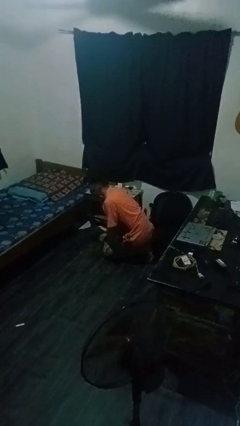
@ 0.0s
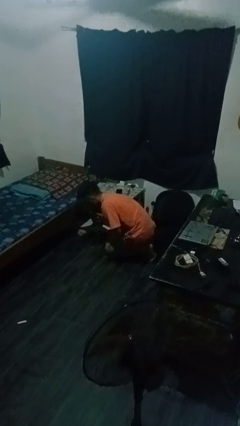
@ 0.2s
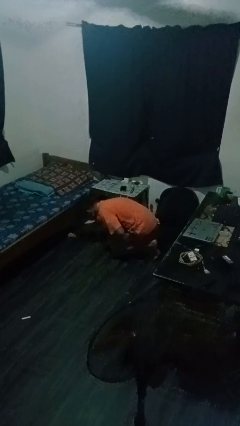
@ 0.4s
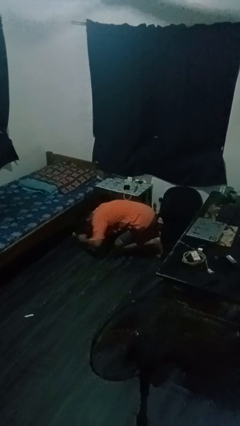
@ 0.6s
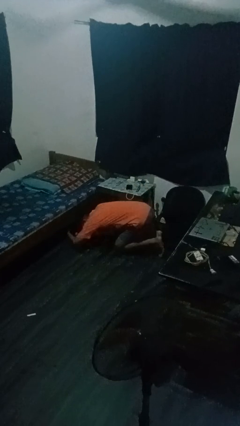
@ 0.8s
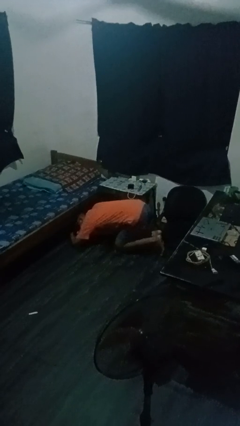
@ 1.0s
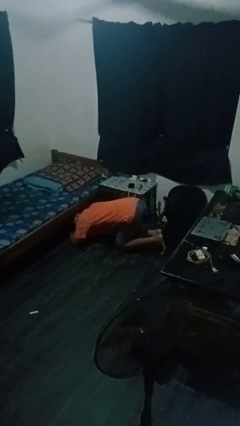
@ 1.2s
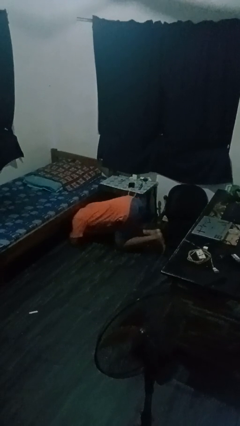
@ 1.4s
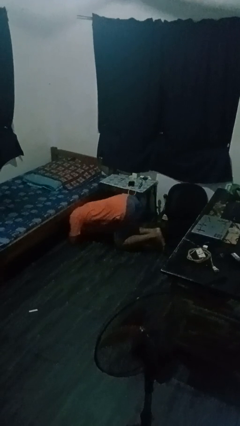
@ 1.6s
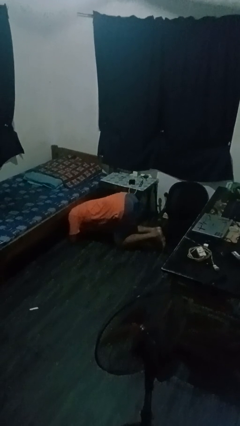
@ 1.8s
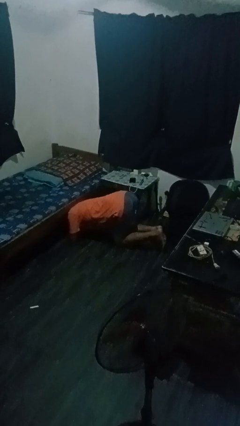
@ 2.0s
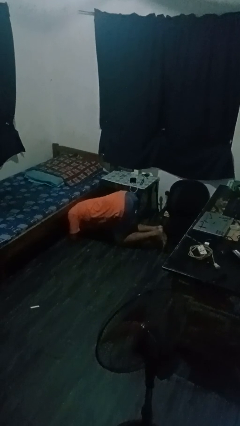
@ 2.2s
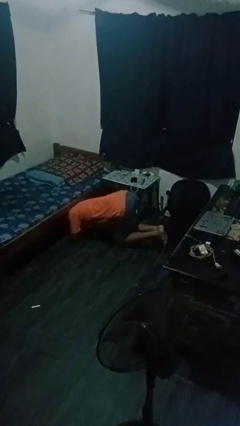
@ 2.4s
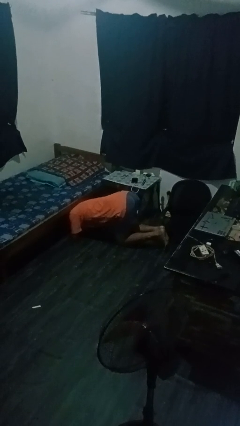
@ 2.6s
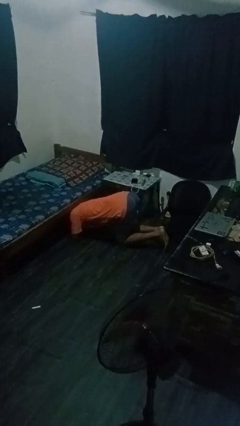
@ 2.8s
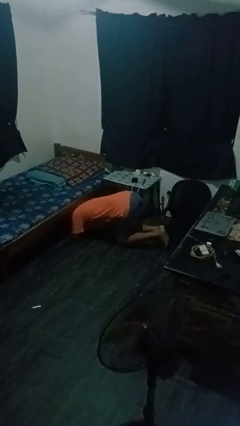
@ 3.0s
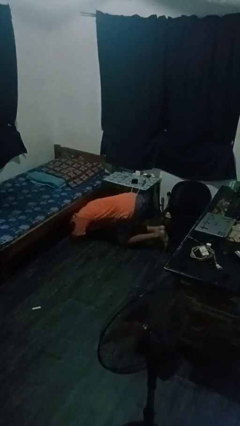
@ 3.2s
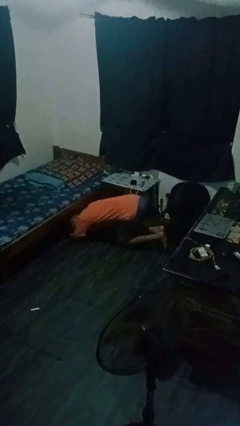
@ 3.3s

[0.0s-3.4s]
person searches under bed

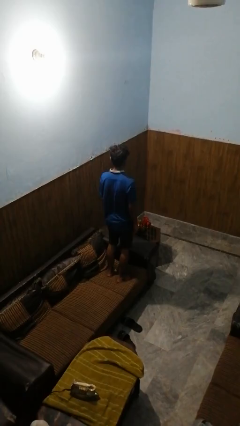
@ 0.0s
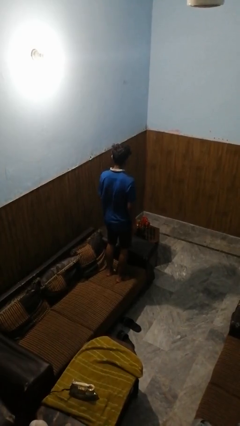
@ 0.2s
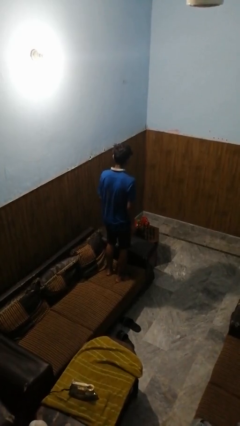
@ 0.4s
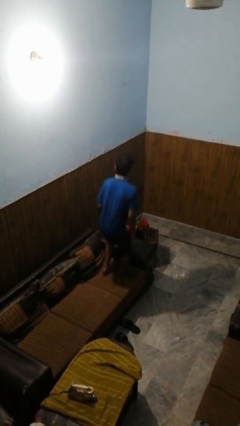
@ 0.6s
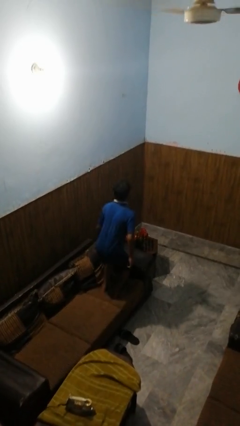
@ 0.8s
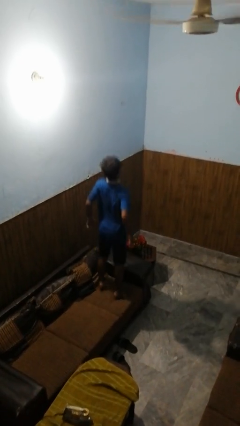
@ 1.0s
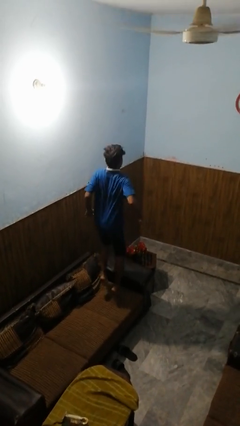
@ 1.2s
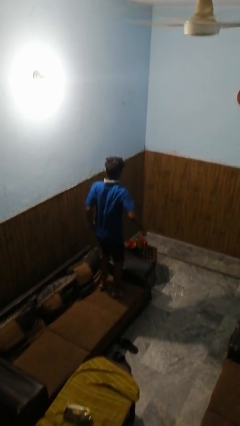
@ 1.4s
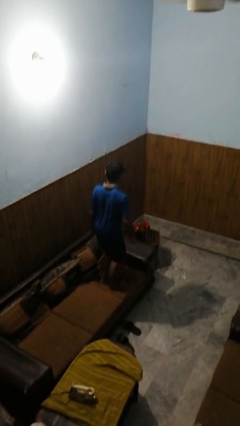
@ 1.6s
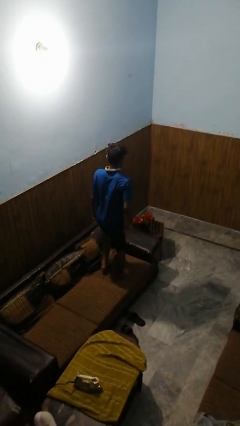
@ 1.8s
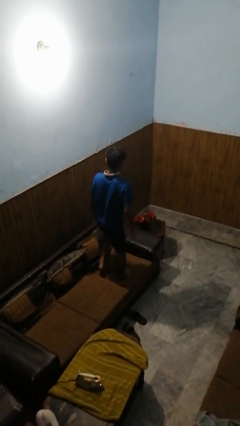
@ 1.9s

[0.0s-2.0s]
person jumps on couch

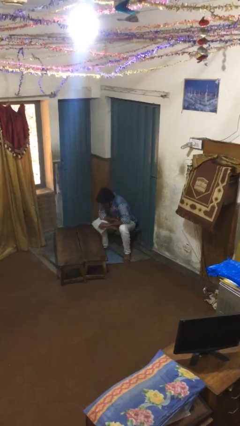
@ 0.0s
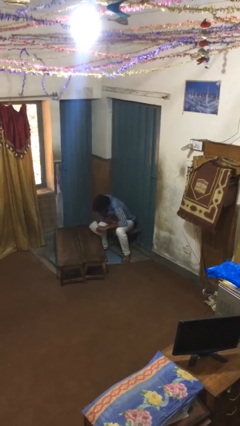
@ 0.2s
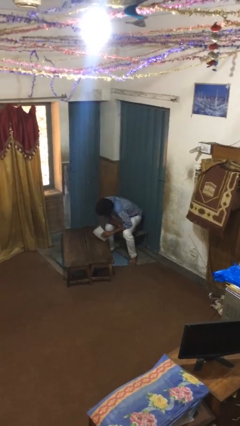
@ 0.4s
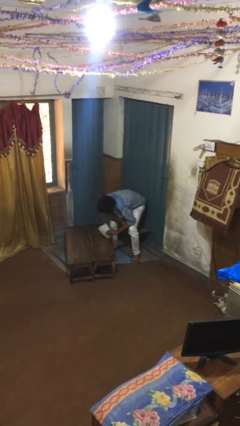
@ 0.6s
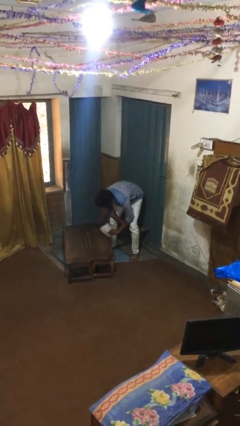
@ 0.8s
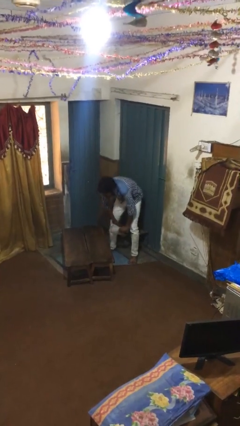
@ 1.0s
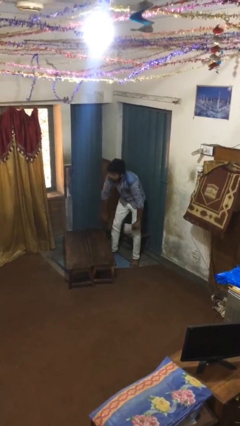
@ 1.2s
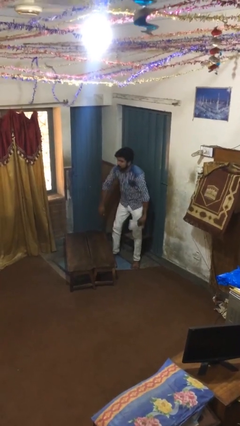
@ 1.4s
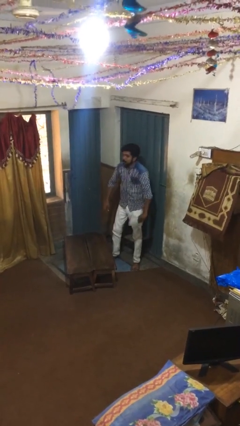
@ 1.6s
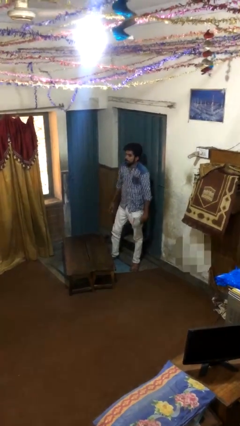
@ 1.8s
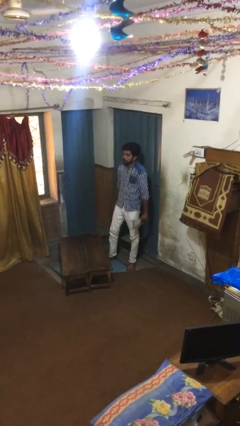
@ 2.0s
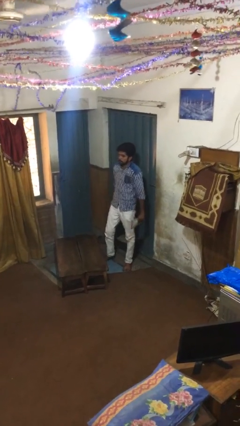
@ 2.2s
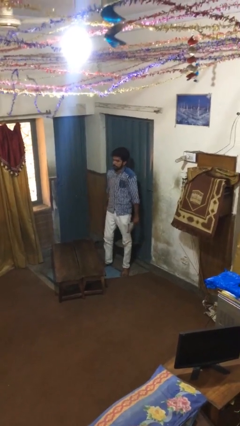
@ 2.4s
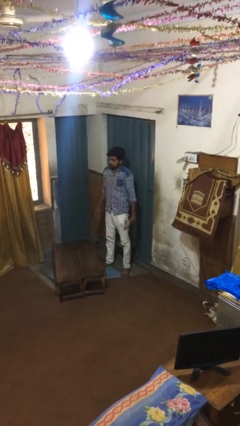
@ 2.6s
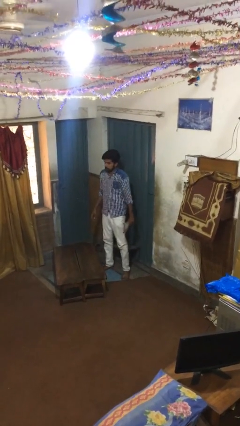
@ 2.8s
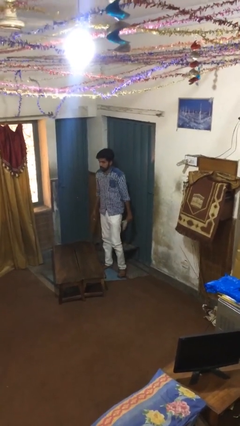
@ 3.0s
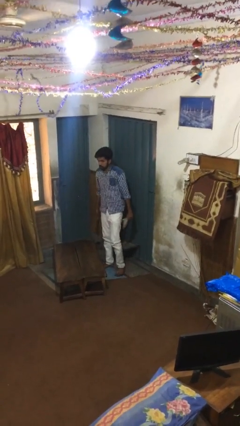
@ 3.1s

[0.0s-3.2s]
person stands up

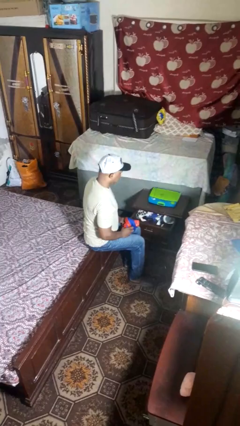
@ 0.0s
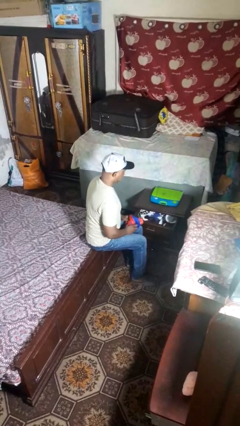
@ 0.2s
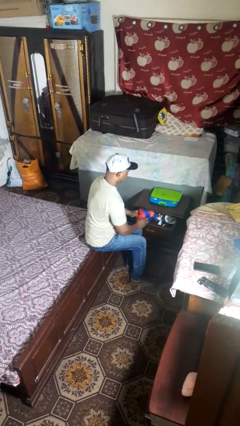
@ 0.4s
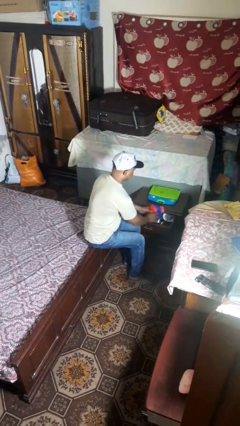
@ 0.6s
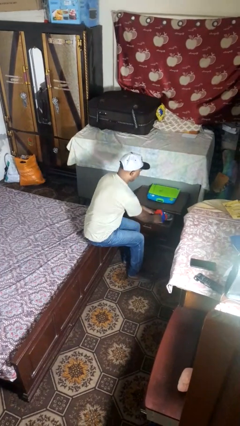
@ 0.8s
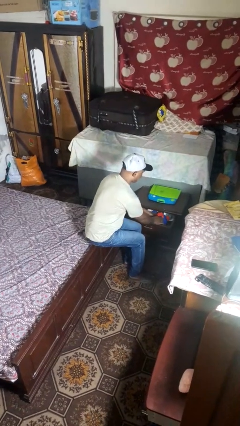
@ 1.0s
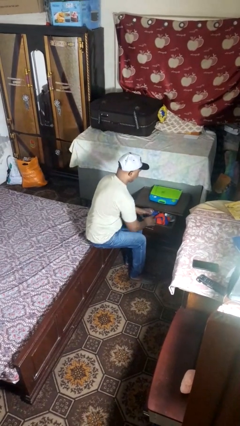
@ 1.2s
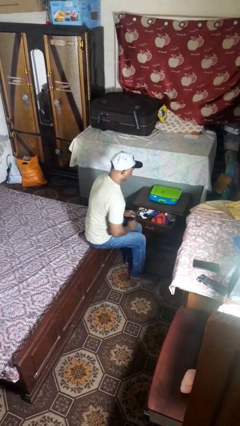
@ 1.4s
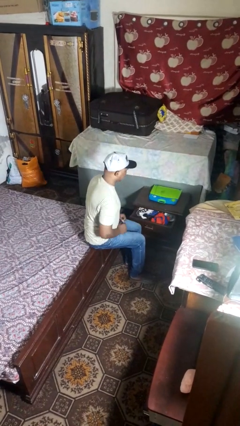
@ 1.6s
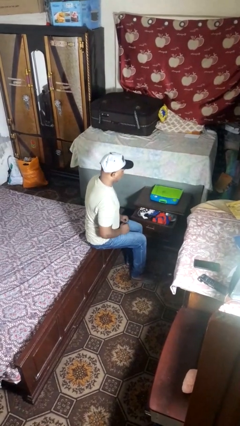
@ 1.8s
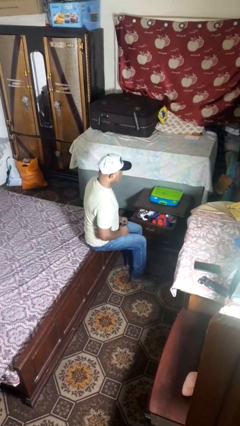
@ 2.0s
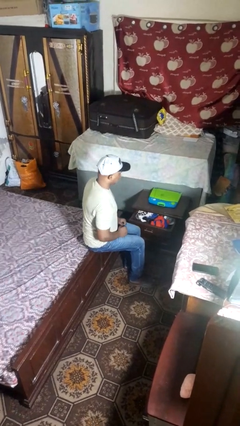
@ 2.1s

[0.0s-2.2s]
person puts clothes into dresser

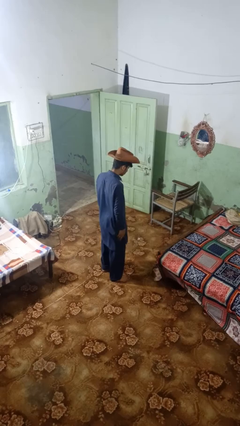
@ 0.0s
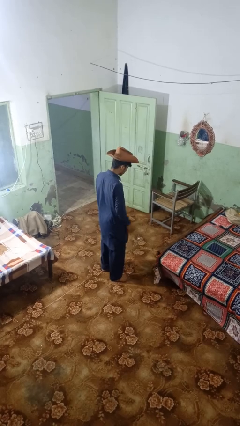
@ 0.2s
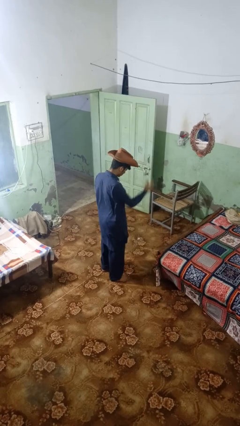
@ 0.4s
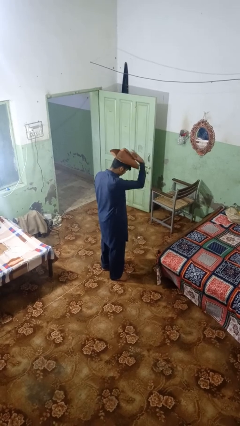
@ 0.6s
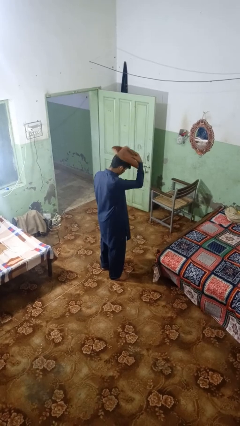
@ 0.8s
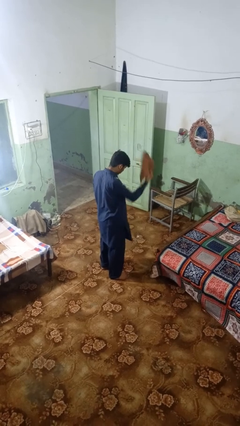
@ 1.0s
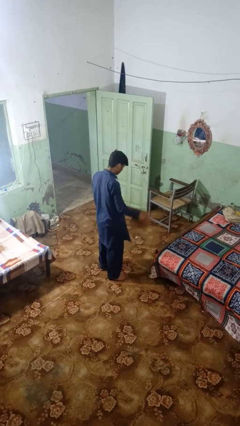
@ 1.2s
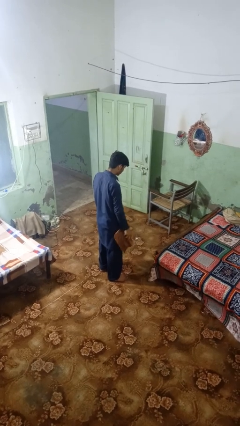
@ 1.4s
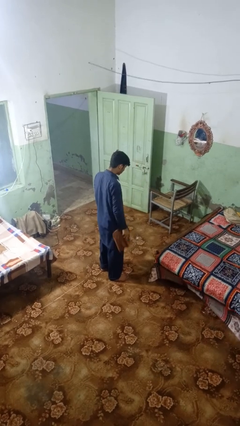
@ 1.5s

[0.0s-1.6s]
person takes off hat

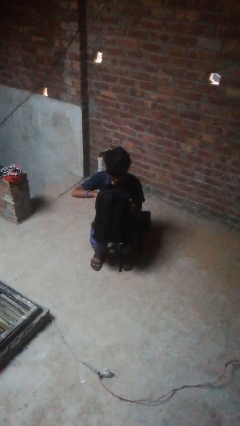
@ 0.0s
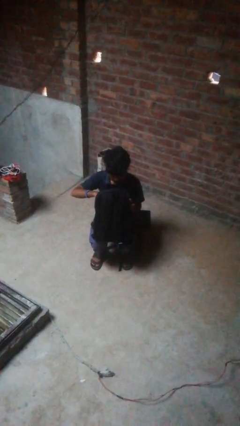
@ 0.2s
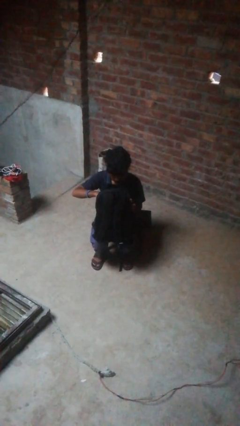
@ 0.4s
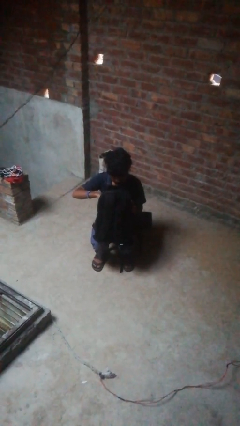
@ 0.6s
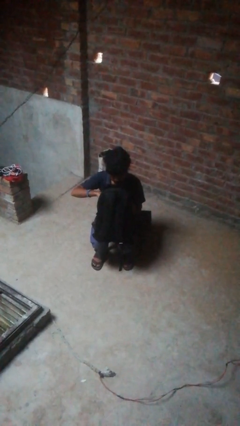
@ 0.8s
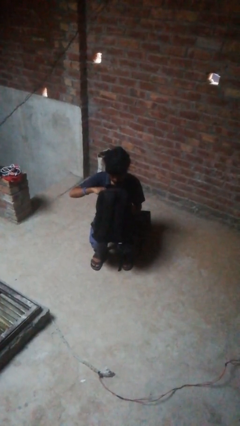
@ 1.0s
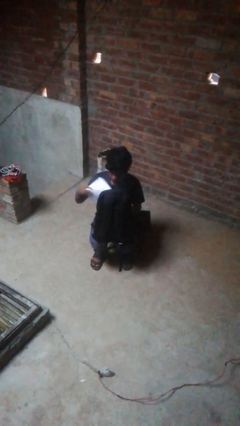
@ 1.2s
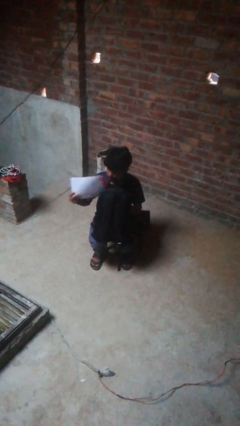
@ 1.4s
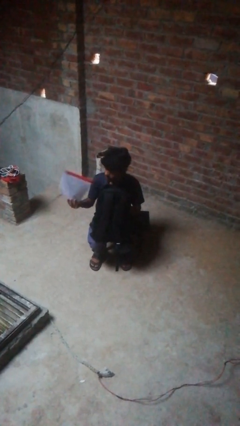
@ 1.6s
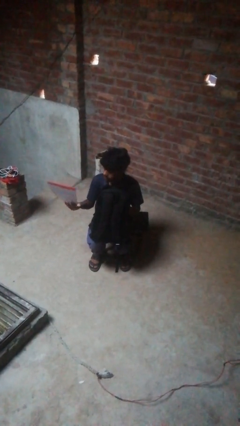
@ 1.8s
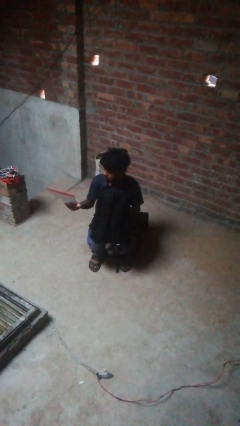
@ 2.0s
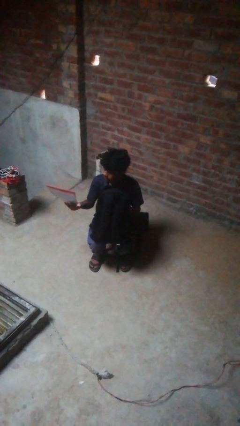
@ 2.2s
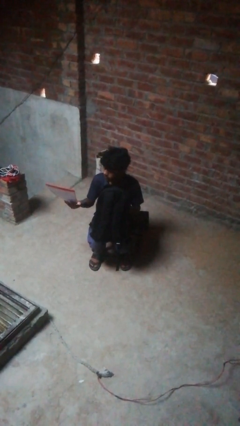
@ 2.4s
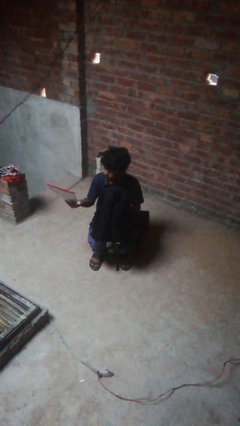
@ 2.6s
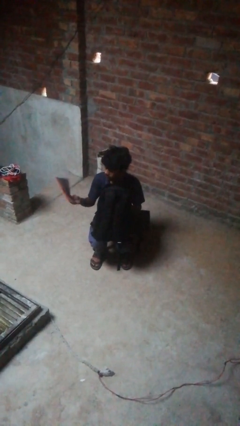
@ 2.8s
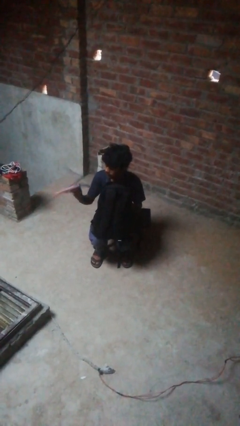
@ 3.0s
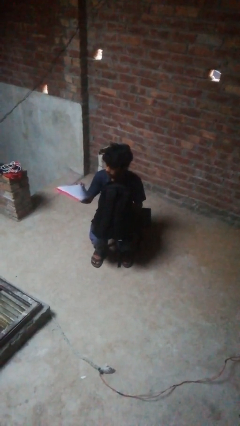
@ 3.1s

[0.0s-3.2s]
person takes object from backpack

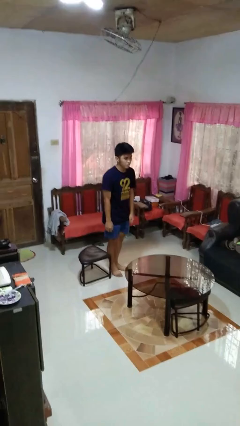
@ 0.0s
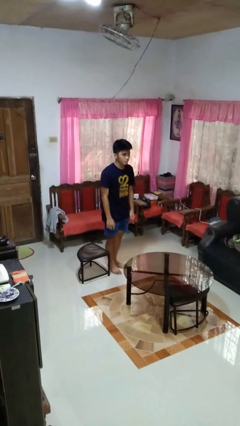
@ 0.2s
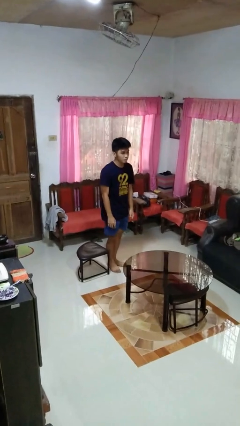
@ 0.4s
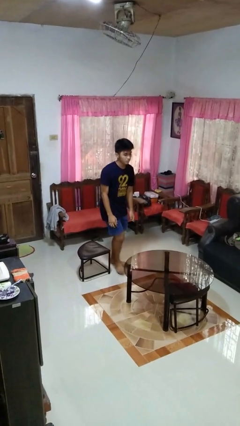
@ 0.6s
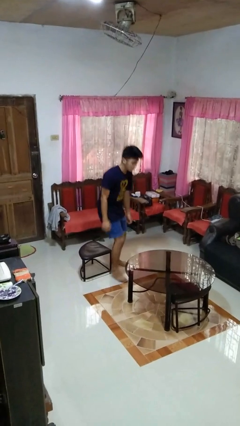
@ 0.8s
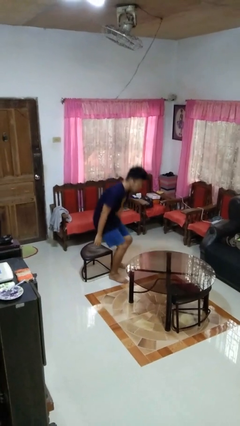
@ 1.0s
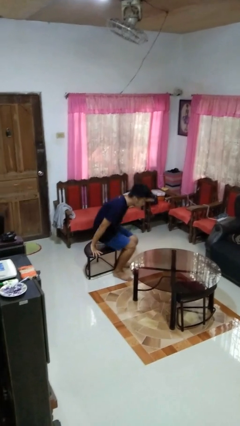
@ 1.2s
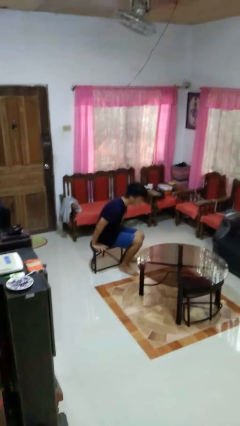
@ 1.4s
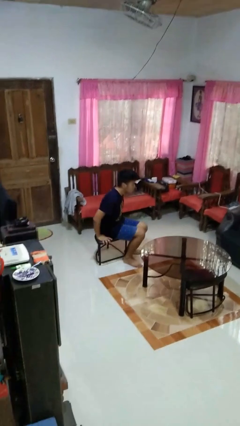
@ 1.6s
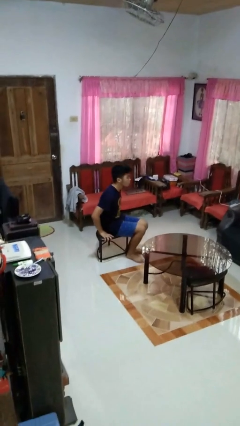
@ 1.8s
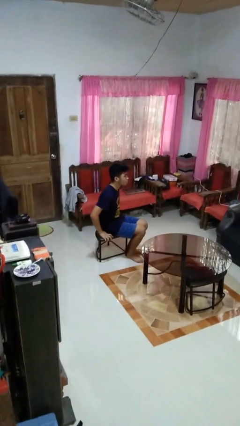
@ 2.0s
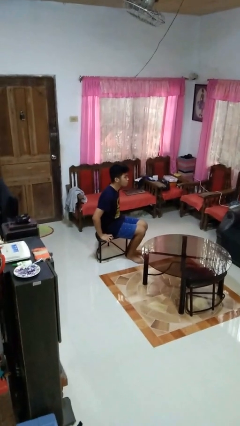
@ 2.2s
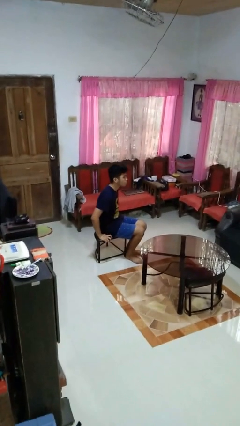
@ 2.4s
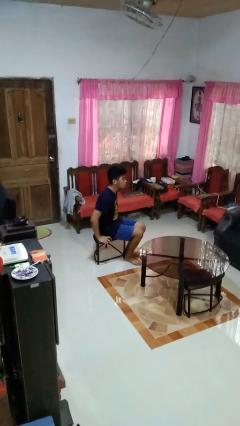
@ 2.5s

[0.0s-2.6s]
person sits down
